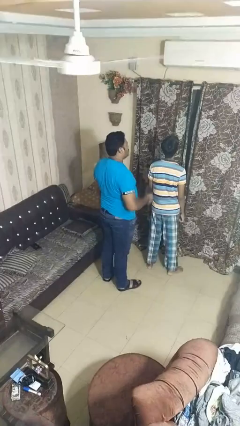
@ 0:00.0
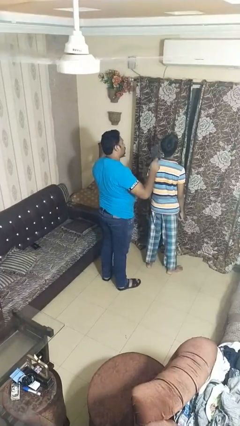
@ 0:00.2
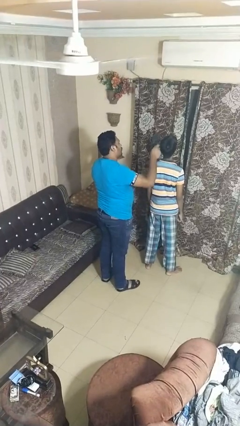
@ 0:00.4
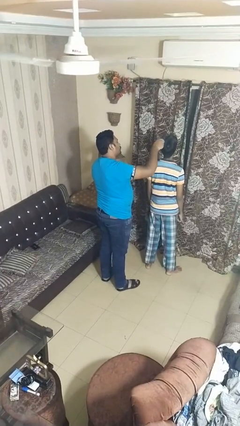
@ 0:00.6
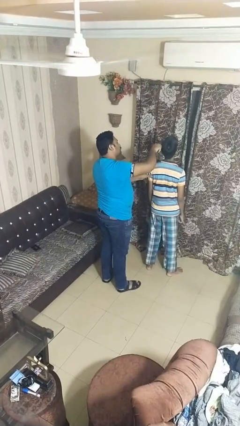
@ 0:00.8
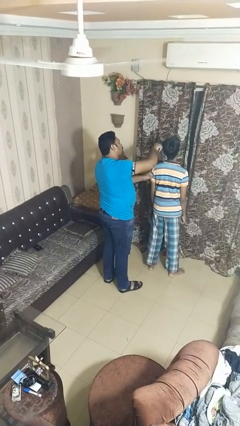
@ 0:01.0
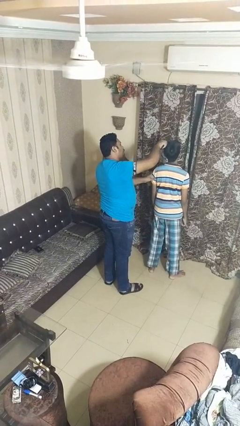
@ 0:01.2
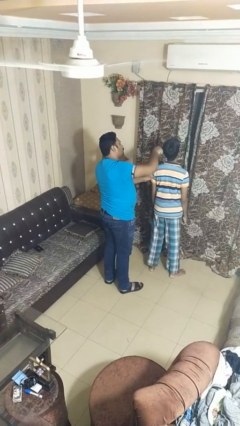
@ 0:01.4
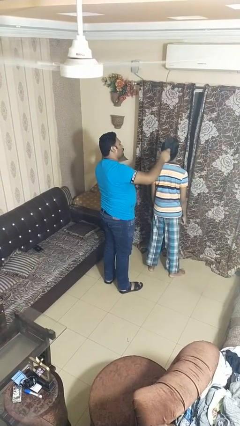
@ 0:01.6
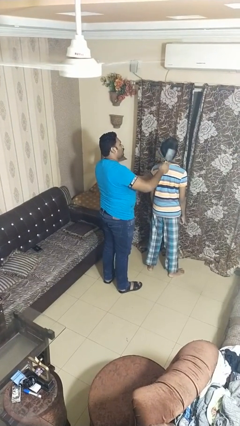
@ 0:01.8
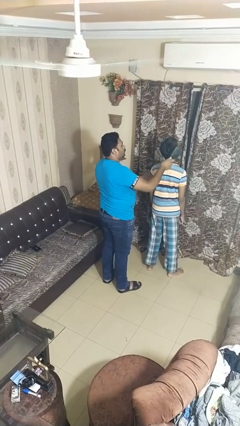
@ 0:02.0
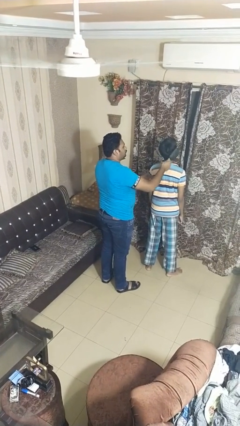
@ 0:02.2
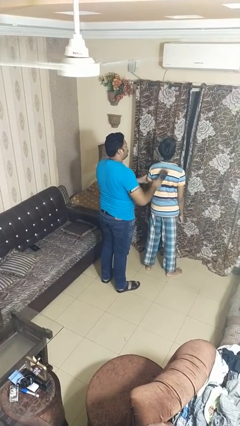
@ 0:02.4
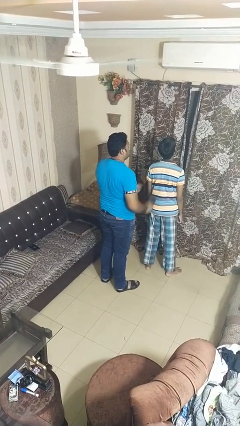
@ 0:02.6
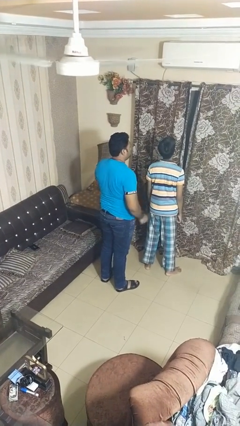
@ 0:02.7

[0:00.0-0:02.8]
person brushes hair of person

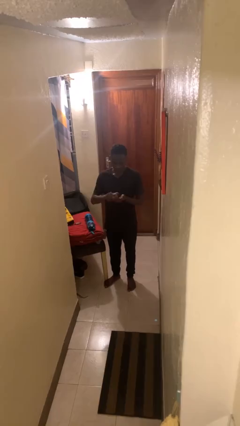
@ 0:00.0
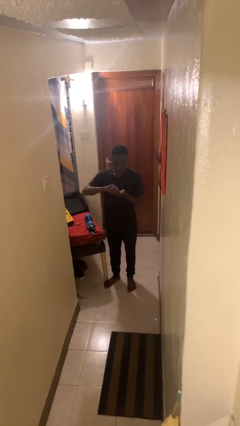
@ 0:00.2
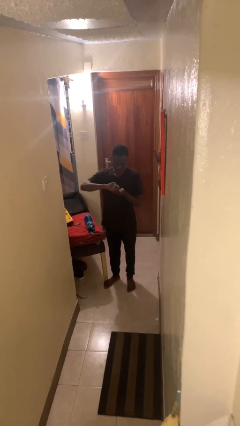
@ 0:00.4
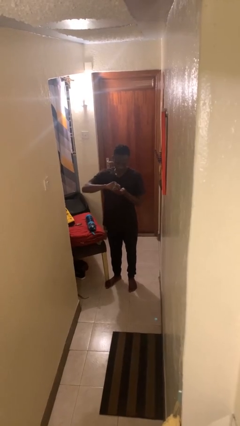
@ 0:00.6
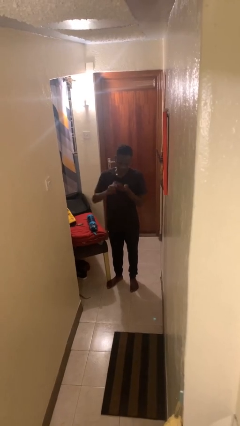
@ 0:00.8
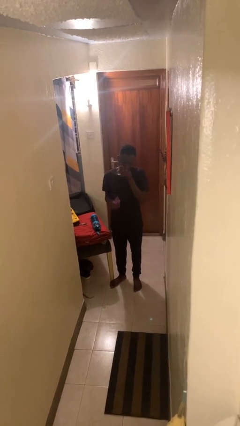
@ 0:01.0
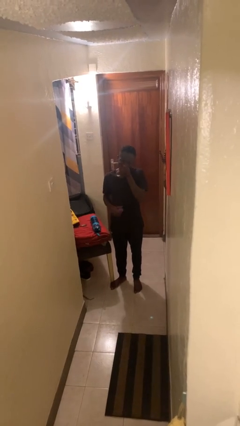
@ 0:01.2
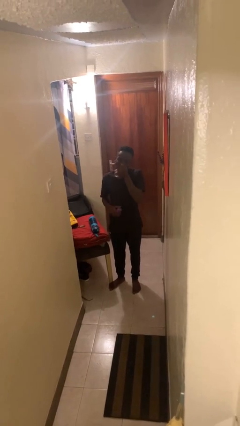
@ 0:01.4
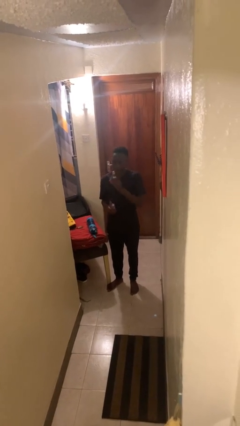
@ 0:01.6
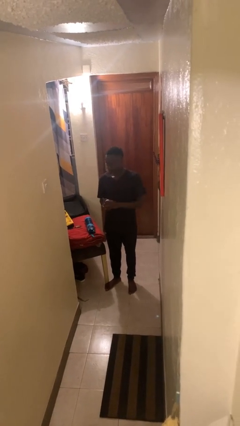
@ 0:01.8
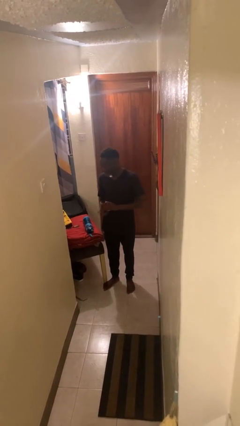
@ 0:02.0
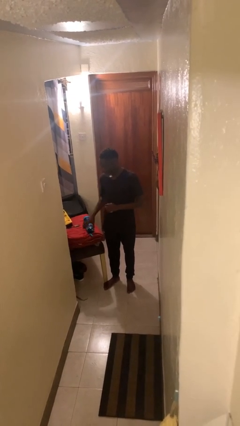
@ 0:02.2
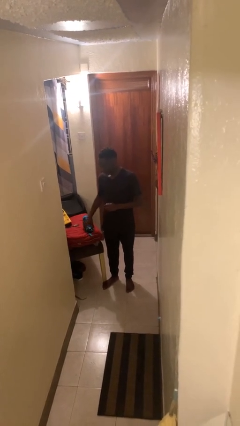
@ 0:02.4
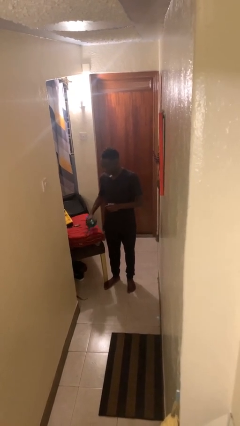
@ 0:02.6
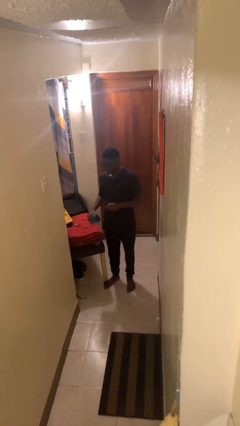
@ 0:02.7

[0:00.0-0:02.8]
person takes medicine pills

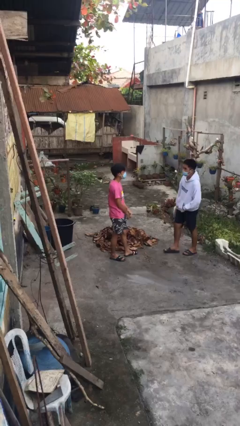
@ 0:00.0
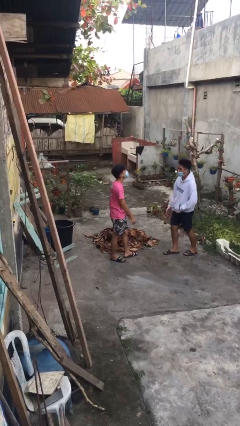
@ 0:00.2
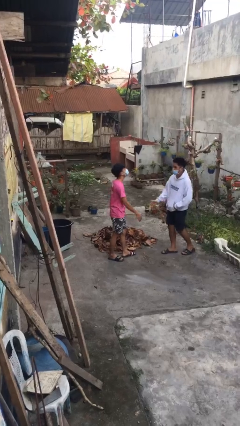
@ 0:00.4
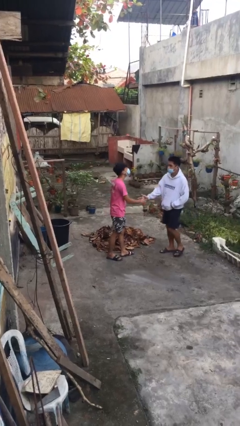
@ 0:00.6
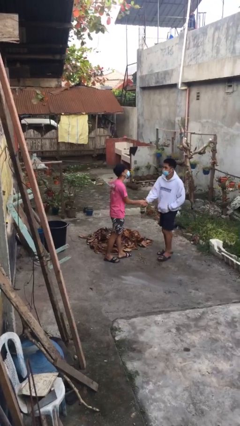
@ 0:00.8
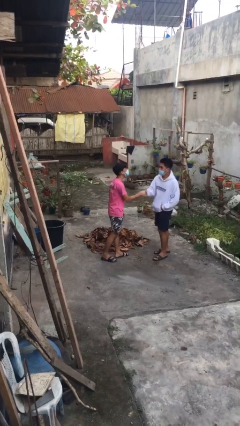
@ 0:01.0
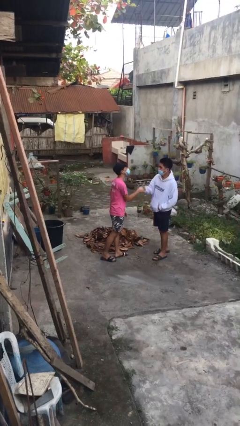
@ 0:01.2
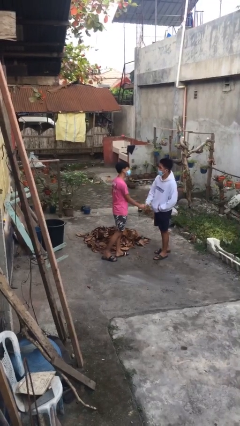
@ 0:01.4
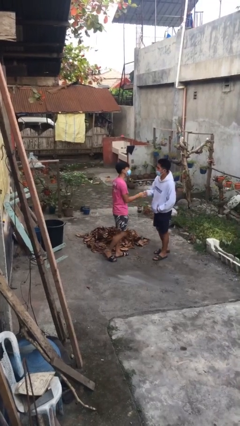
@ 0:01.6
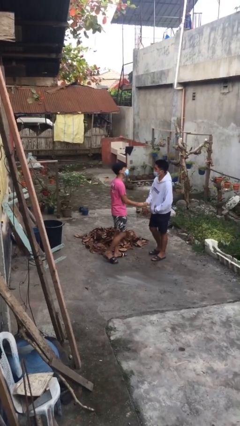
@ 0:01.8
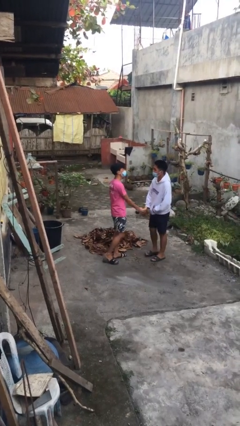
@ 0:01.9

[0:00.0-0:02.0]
person shakes hand

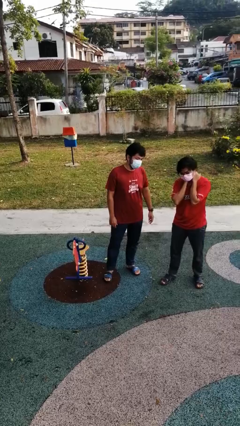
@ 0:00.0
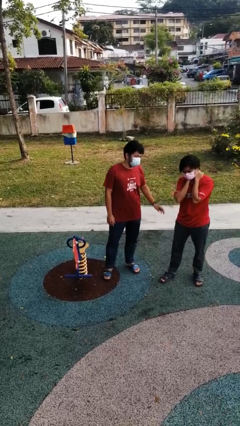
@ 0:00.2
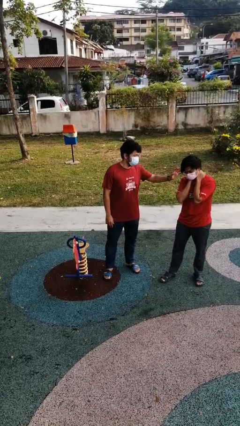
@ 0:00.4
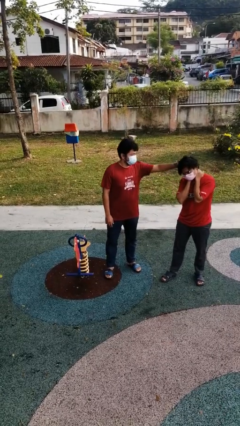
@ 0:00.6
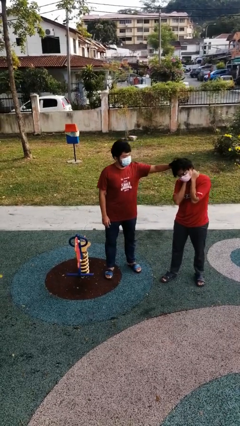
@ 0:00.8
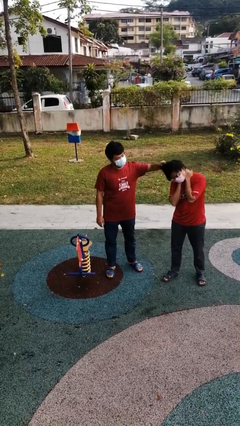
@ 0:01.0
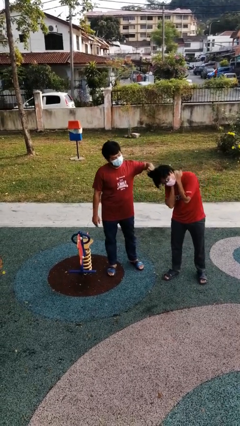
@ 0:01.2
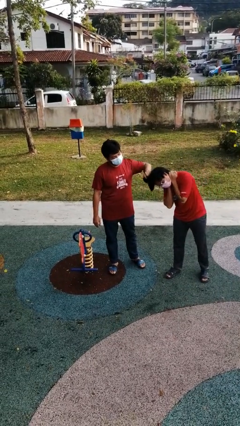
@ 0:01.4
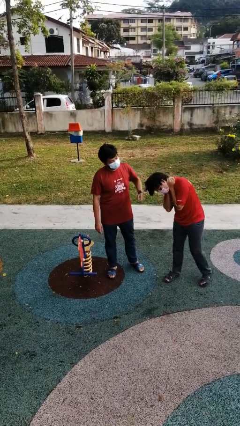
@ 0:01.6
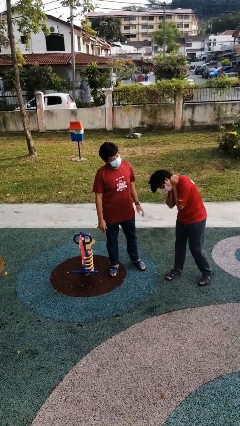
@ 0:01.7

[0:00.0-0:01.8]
person grabs person by hair

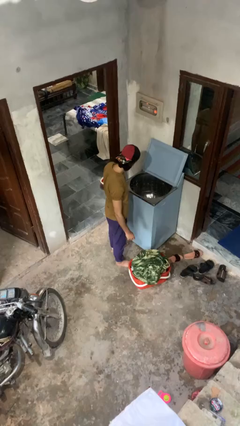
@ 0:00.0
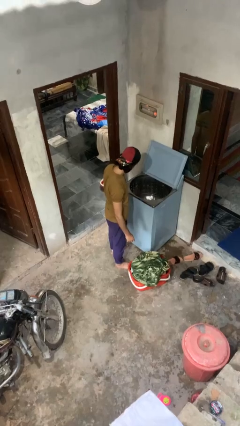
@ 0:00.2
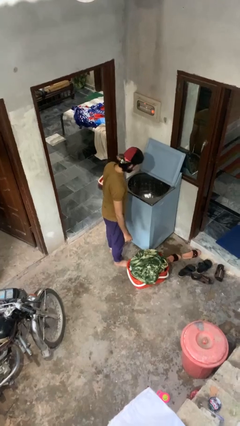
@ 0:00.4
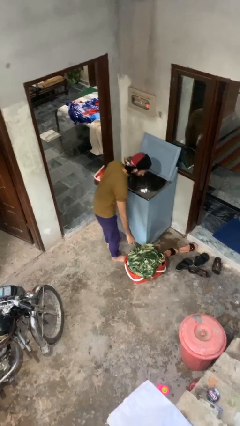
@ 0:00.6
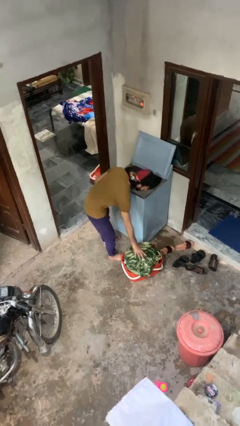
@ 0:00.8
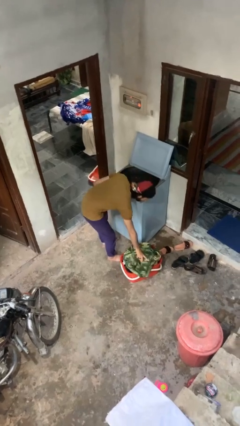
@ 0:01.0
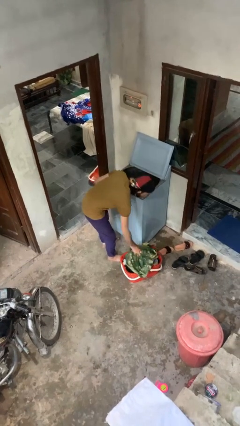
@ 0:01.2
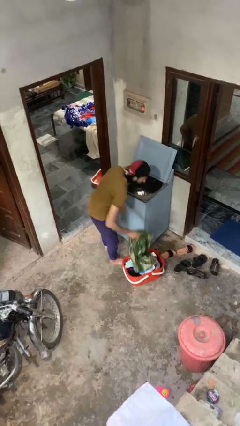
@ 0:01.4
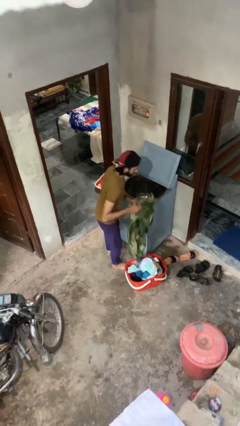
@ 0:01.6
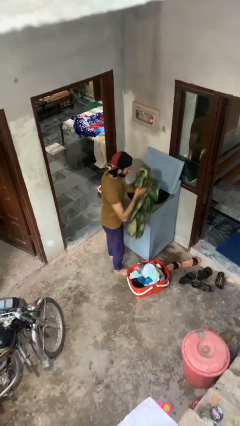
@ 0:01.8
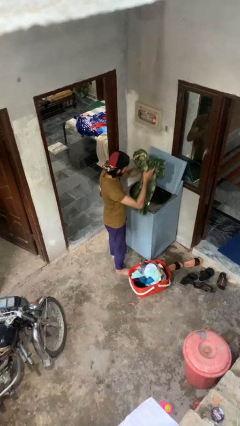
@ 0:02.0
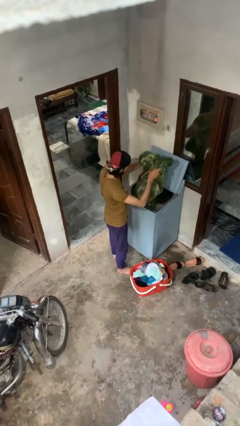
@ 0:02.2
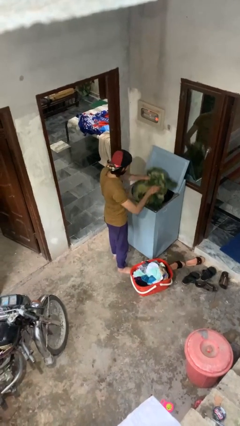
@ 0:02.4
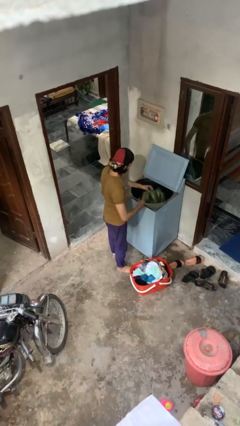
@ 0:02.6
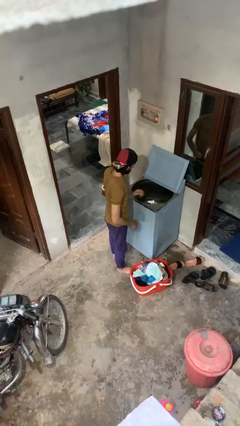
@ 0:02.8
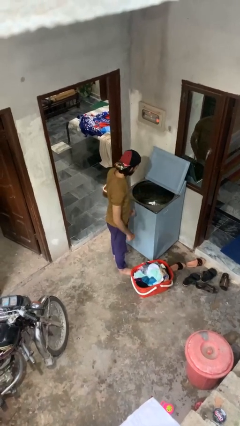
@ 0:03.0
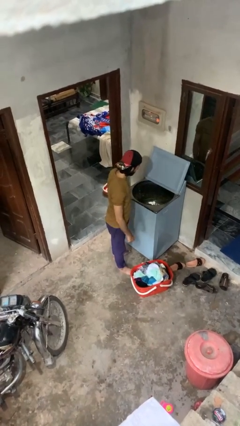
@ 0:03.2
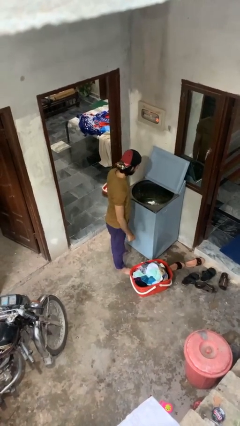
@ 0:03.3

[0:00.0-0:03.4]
person loads clotheswasher

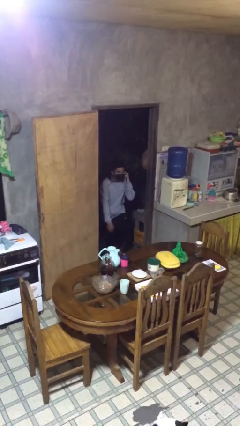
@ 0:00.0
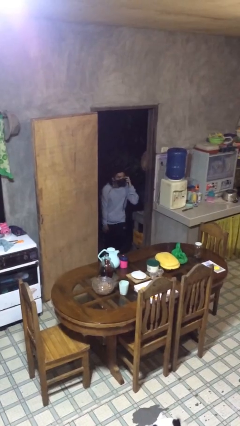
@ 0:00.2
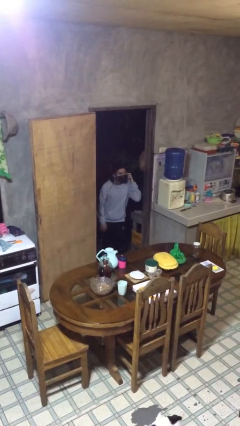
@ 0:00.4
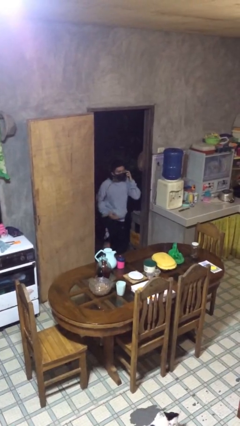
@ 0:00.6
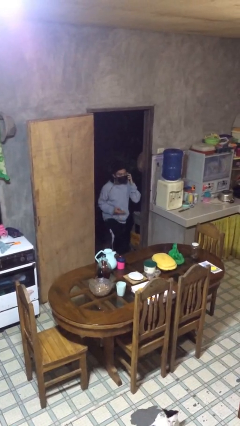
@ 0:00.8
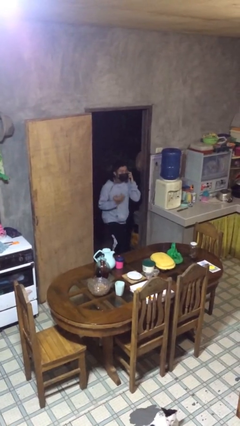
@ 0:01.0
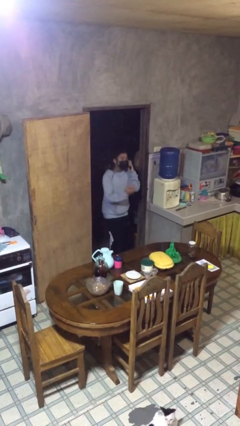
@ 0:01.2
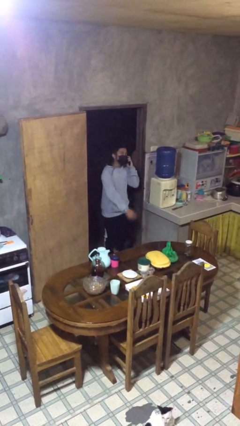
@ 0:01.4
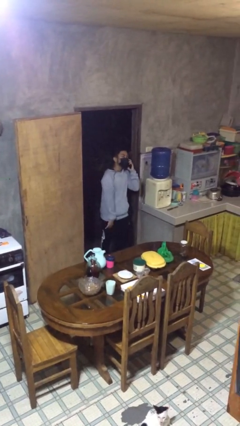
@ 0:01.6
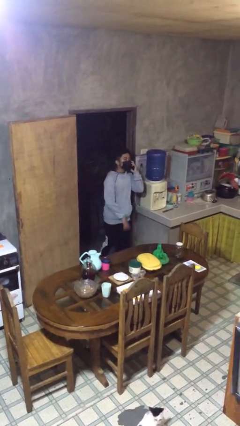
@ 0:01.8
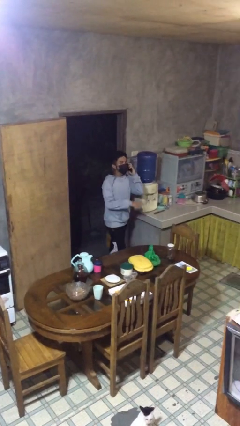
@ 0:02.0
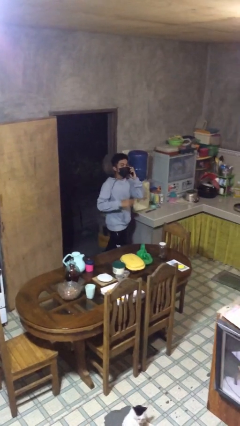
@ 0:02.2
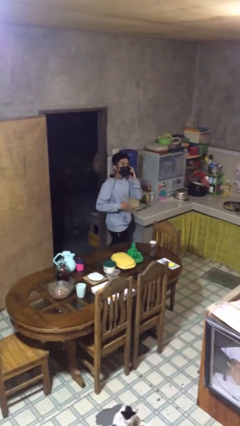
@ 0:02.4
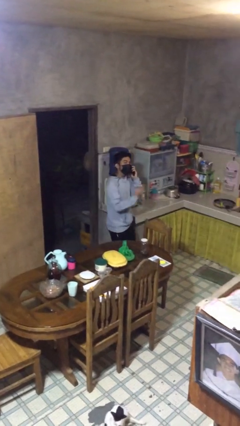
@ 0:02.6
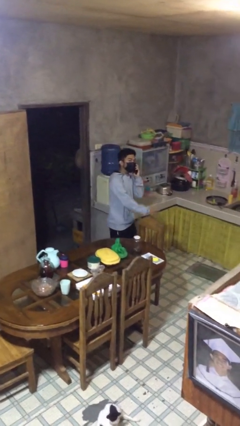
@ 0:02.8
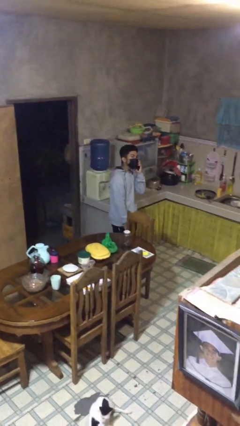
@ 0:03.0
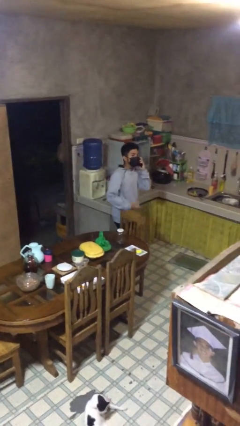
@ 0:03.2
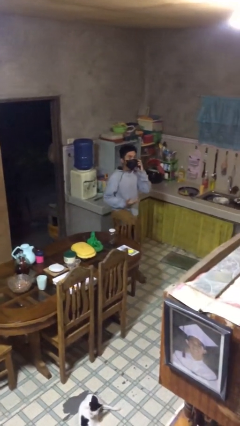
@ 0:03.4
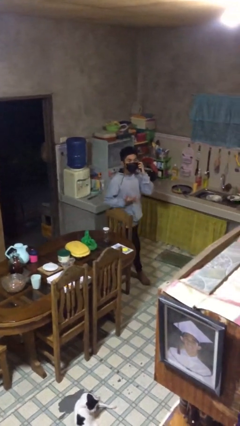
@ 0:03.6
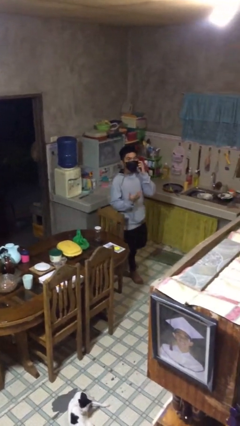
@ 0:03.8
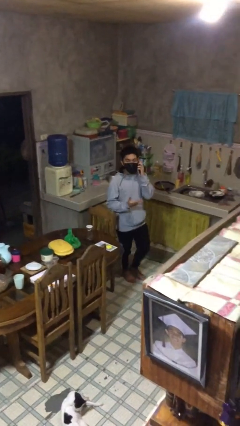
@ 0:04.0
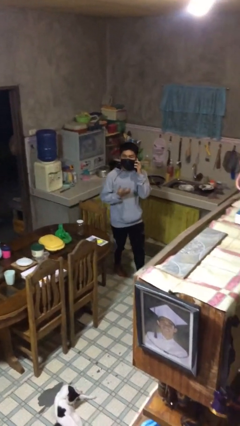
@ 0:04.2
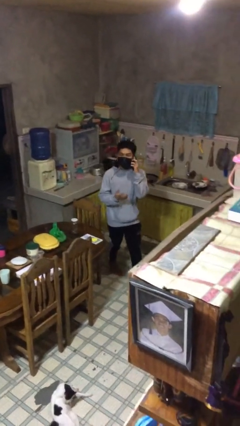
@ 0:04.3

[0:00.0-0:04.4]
person enters scene through structure
